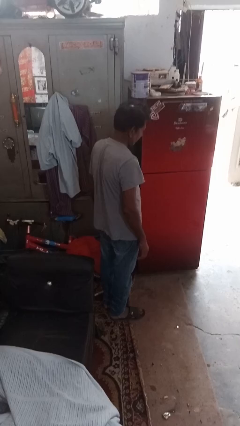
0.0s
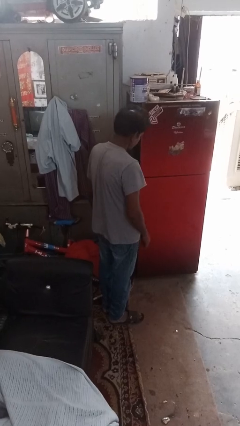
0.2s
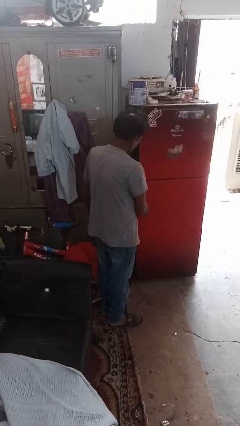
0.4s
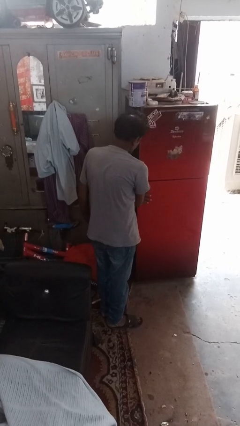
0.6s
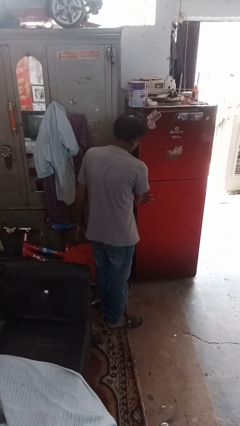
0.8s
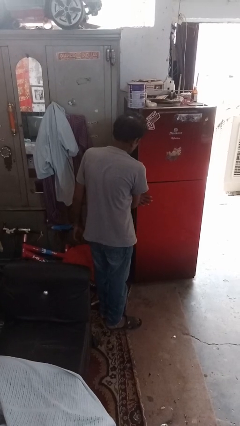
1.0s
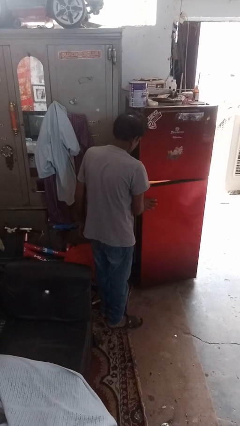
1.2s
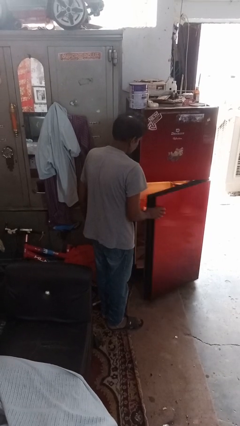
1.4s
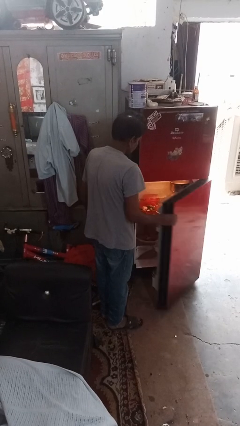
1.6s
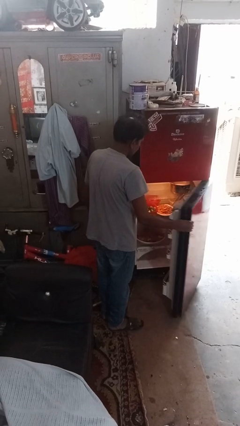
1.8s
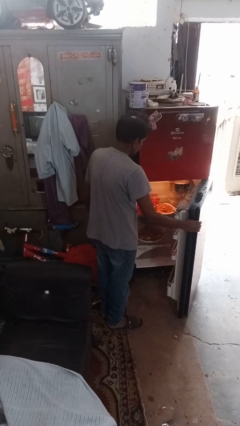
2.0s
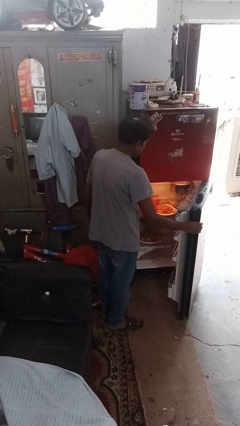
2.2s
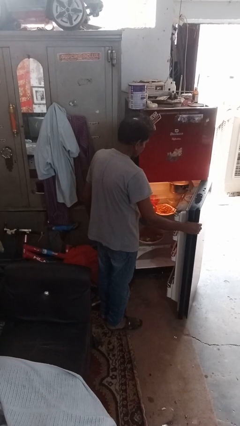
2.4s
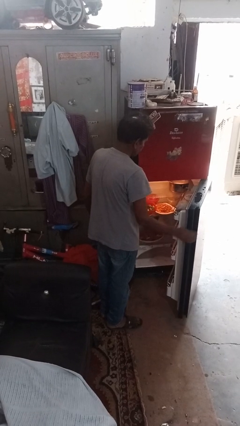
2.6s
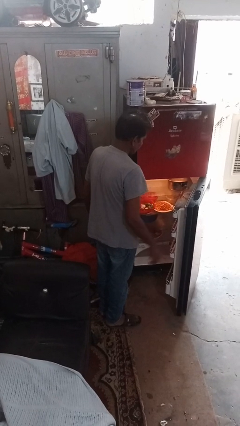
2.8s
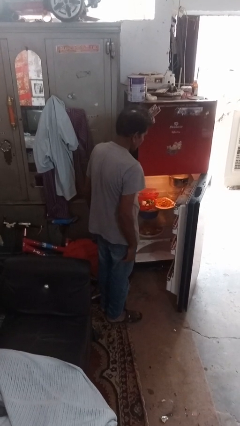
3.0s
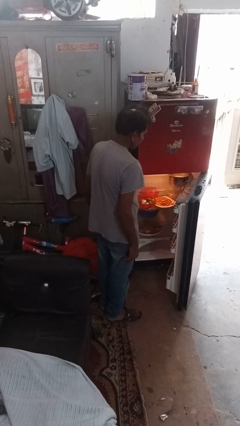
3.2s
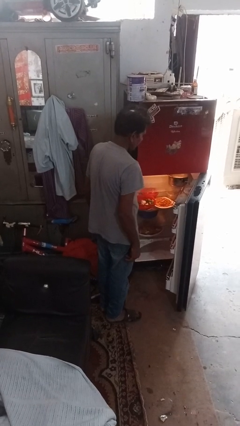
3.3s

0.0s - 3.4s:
person opens refrigerator

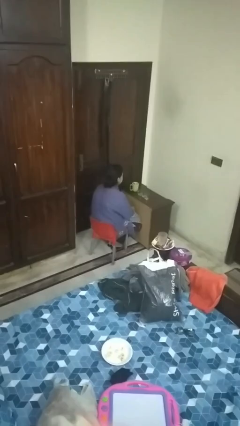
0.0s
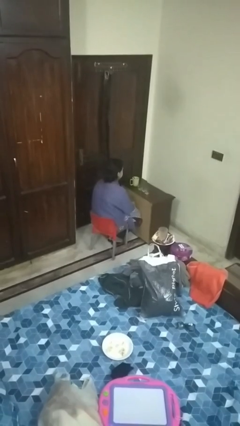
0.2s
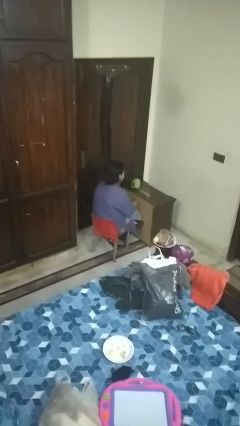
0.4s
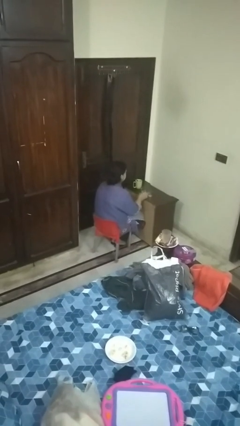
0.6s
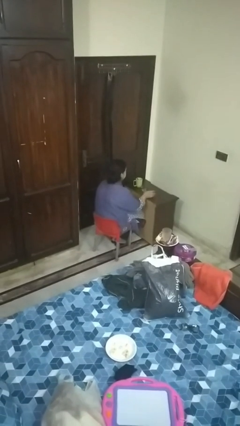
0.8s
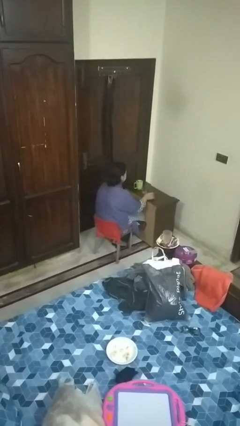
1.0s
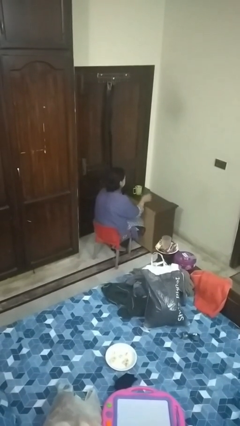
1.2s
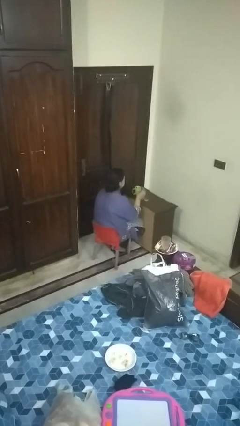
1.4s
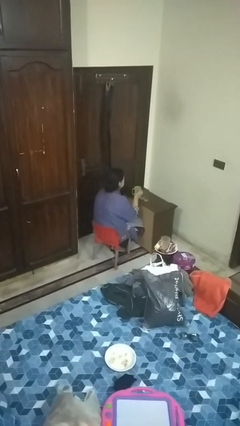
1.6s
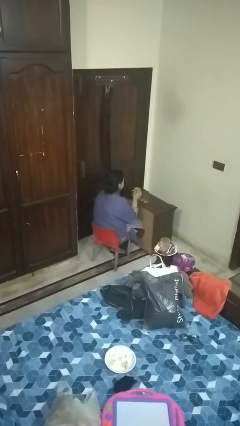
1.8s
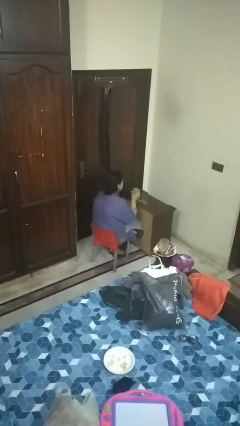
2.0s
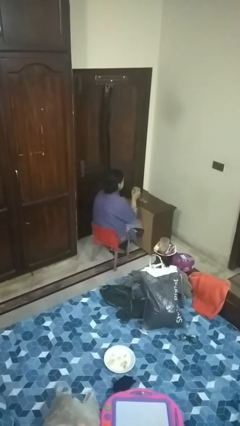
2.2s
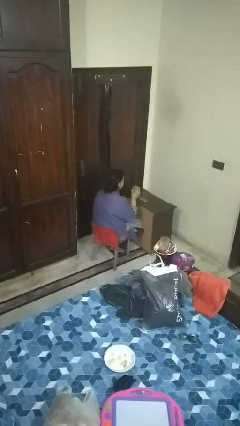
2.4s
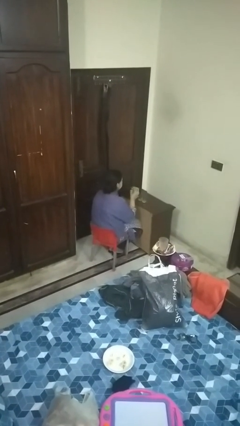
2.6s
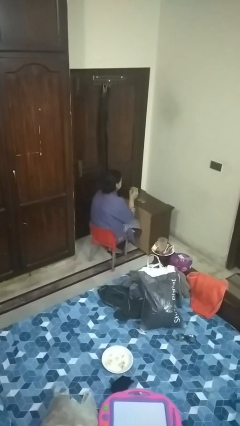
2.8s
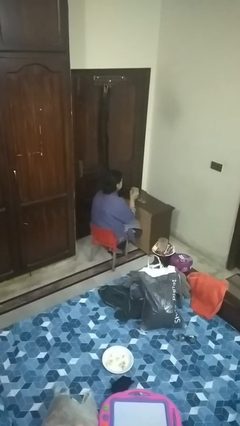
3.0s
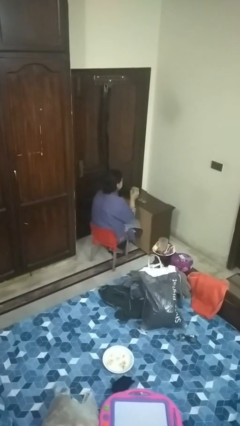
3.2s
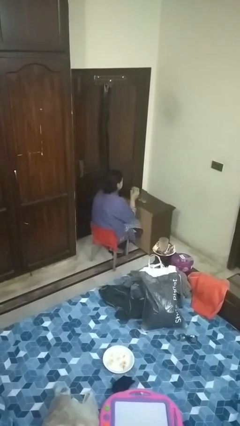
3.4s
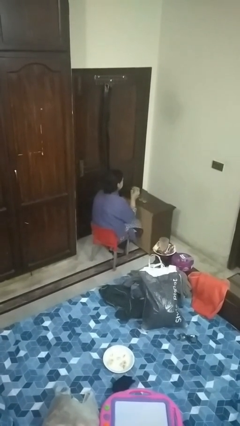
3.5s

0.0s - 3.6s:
person picks up object from table

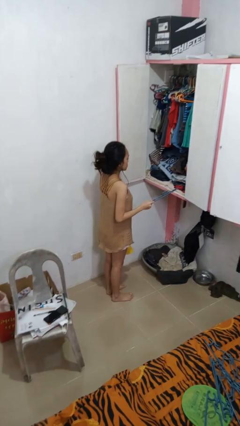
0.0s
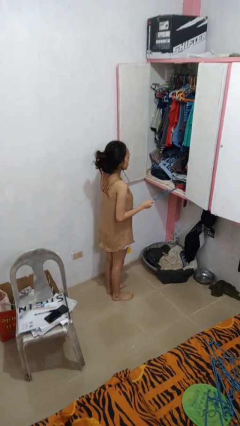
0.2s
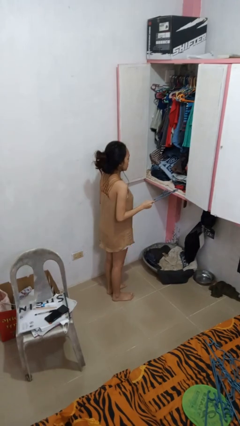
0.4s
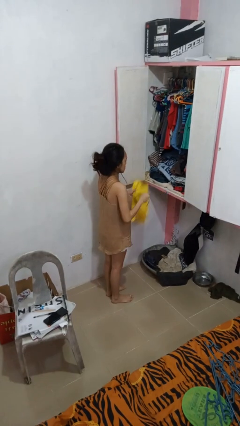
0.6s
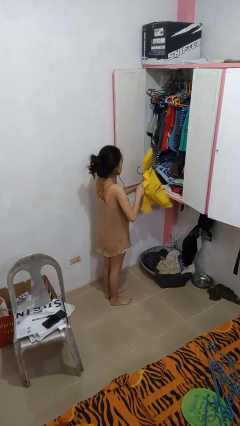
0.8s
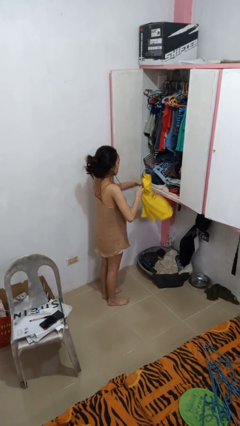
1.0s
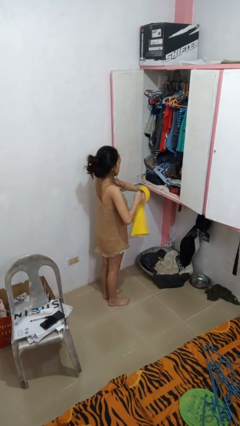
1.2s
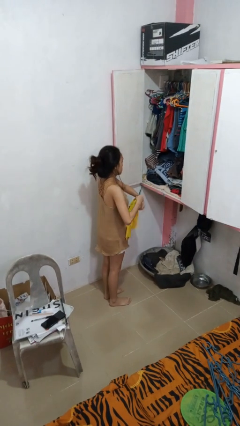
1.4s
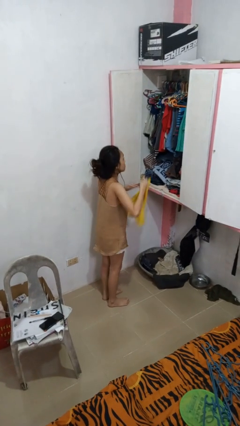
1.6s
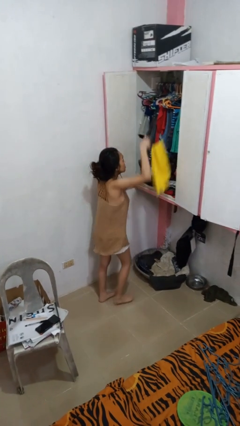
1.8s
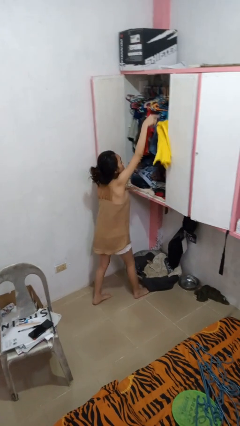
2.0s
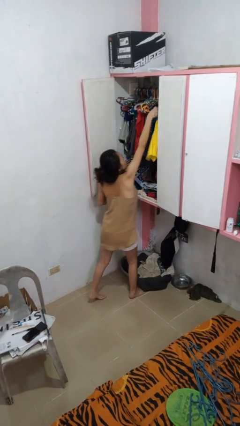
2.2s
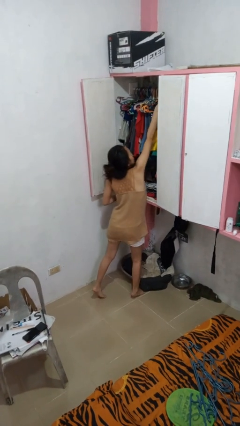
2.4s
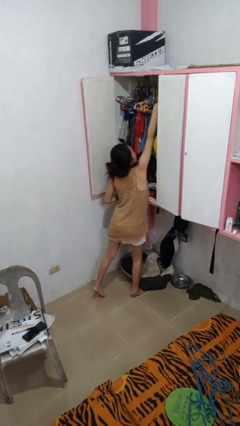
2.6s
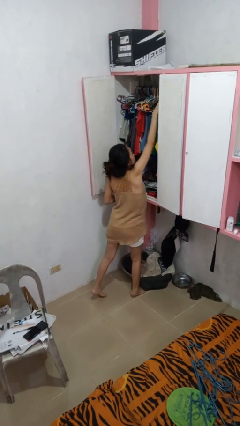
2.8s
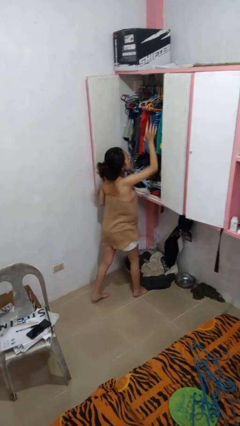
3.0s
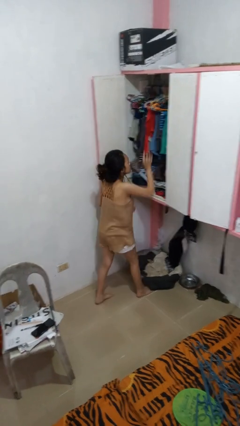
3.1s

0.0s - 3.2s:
person puts clothes into closet

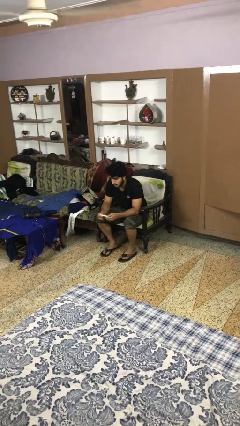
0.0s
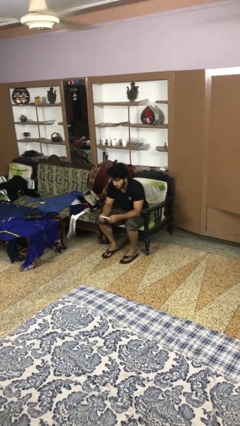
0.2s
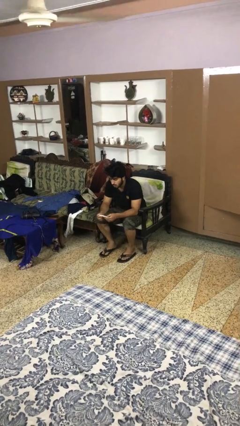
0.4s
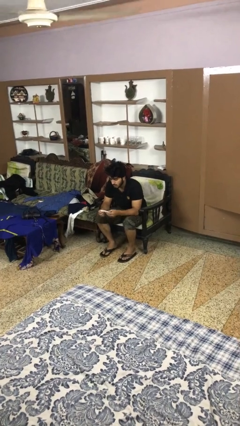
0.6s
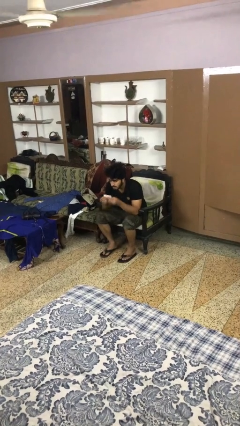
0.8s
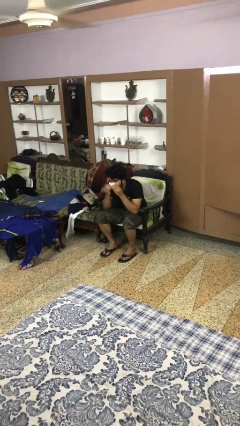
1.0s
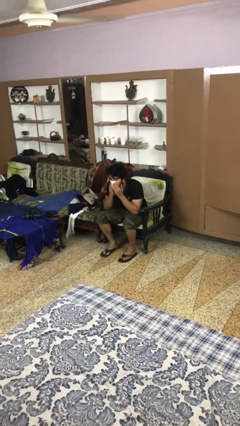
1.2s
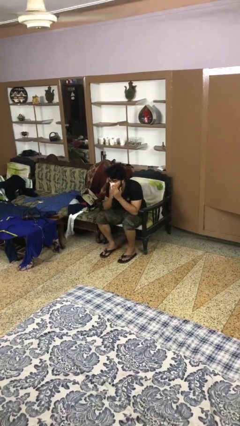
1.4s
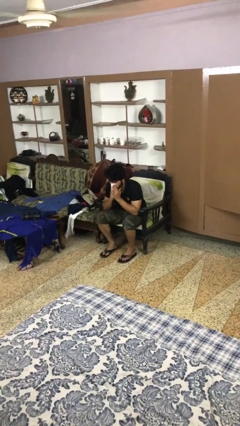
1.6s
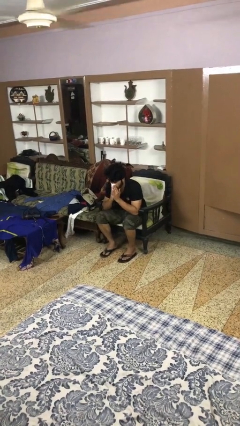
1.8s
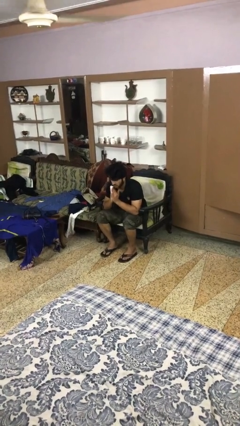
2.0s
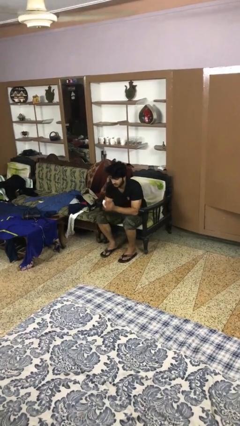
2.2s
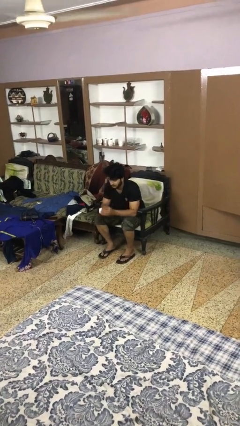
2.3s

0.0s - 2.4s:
person blows nose

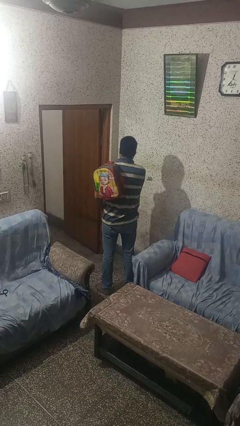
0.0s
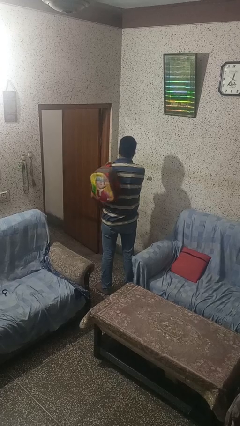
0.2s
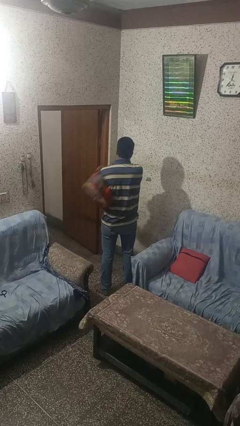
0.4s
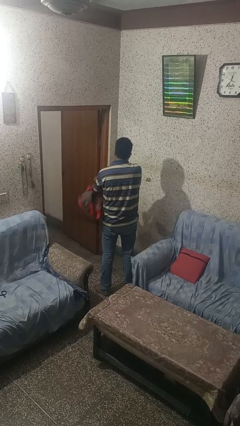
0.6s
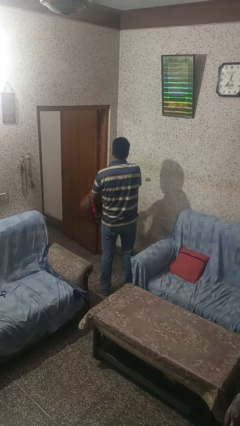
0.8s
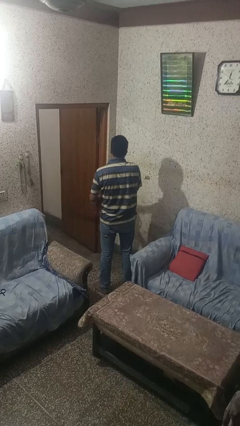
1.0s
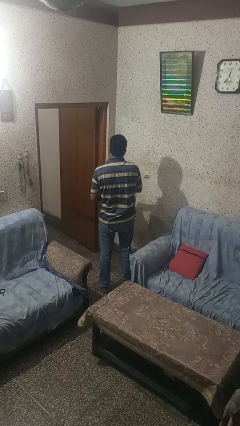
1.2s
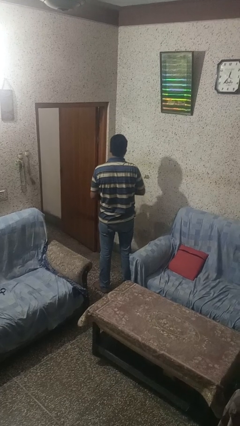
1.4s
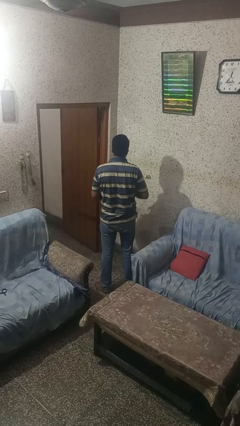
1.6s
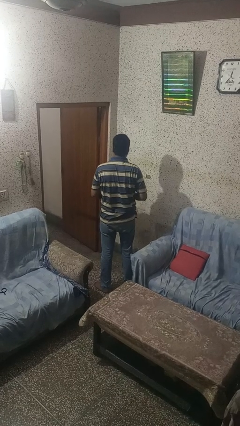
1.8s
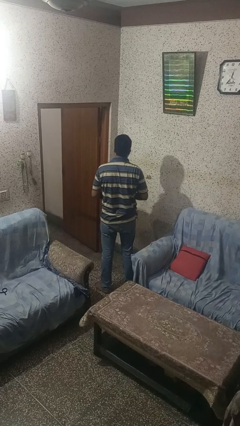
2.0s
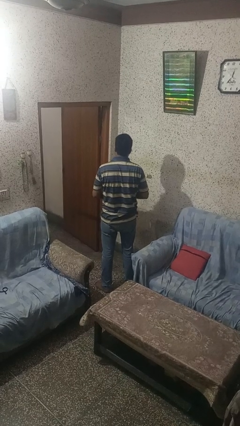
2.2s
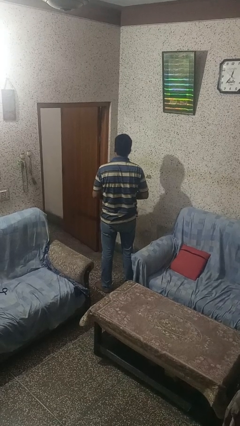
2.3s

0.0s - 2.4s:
person takes off backpack

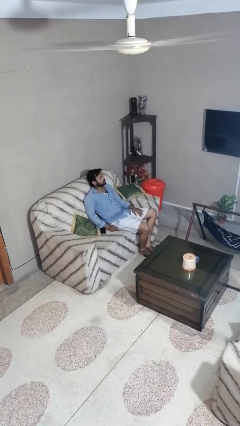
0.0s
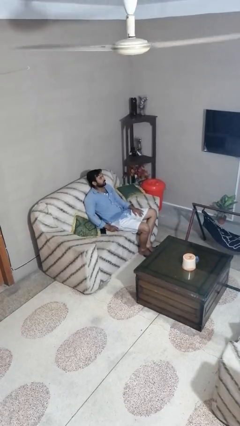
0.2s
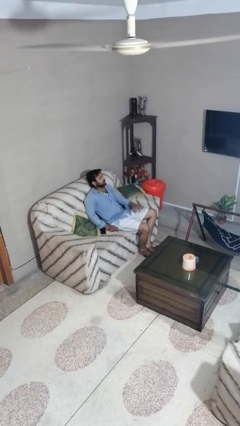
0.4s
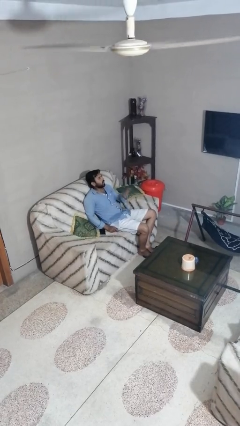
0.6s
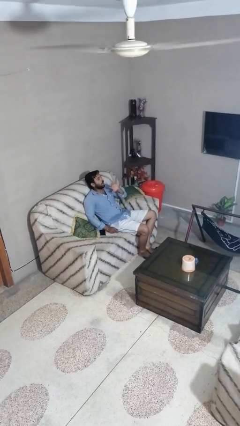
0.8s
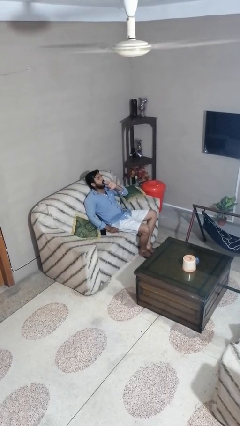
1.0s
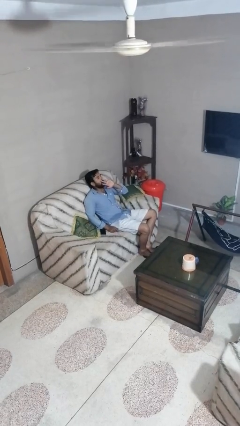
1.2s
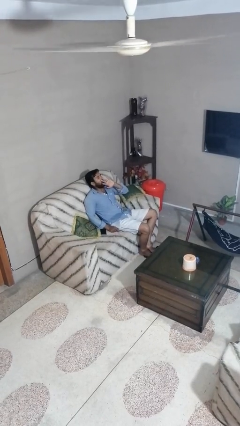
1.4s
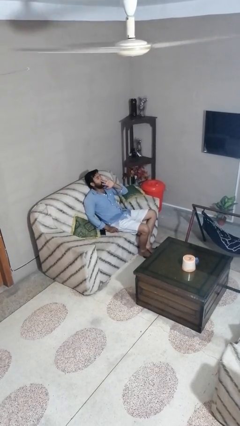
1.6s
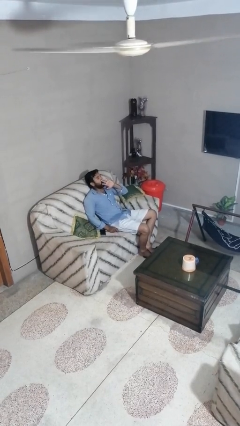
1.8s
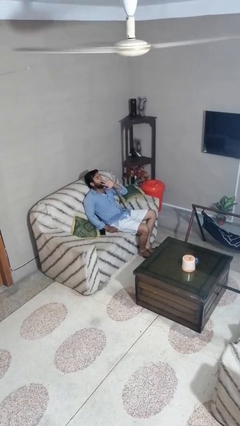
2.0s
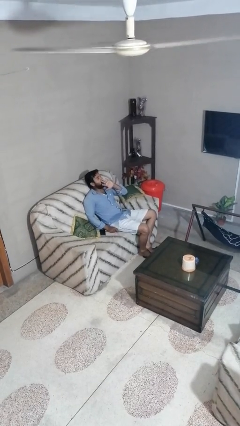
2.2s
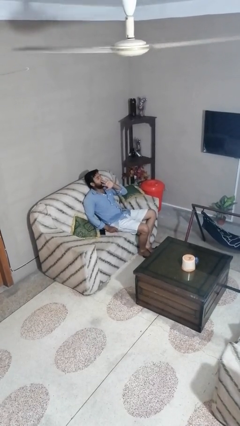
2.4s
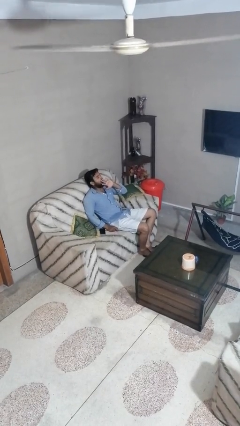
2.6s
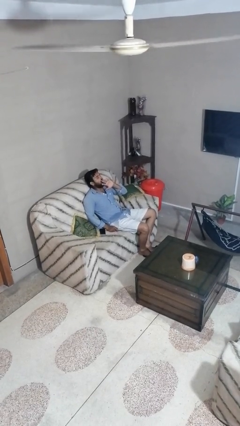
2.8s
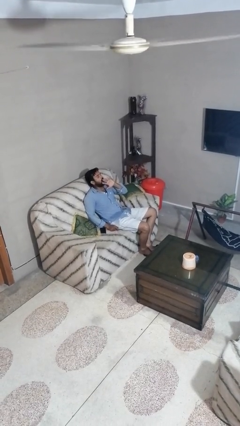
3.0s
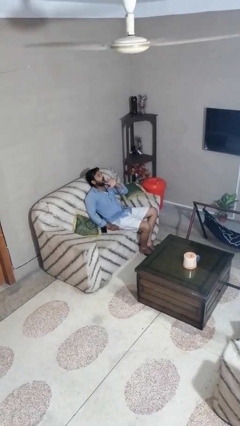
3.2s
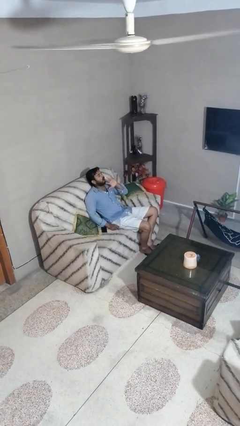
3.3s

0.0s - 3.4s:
person yawns
